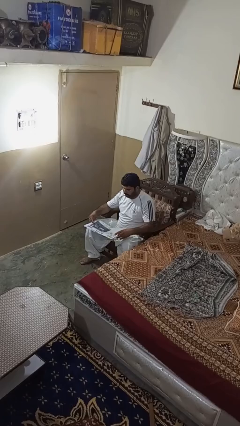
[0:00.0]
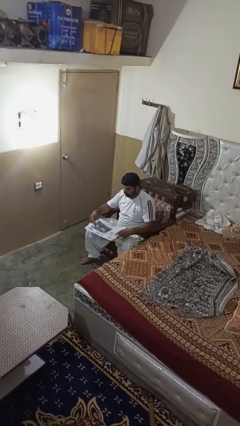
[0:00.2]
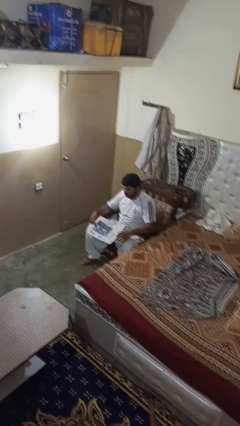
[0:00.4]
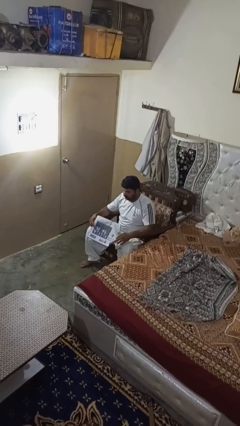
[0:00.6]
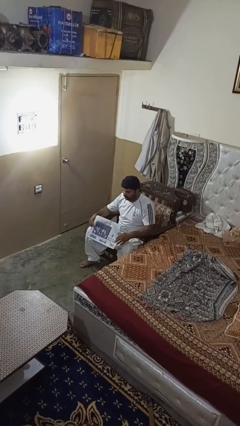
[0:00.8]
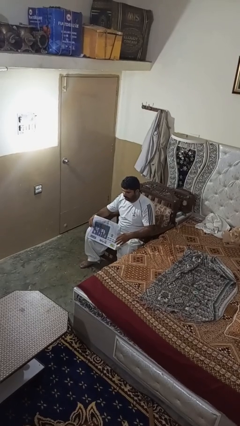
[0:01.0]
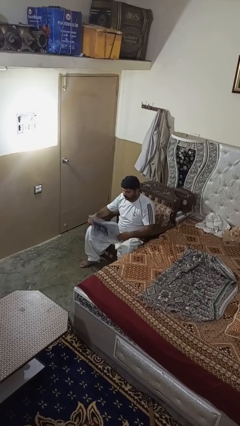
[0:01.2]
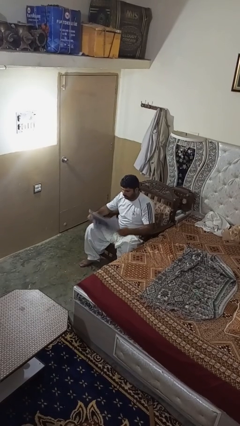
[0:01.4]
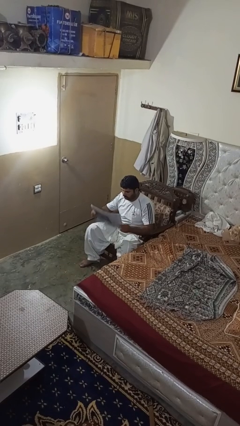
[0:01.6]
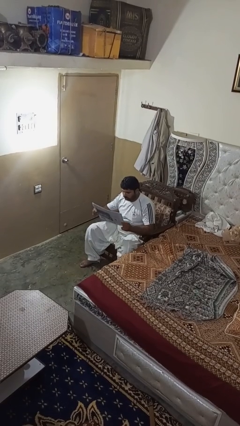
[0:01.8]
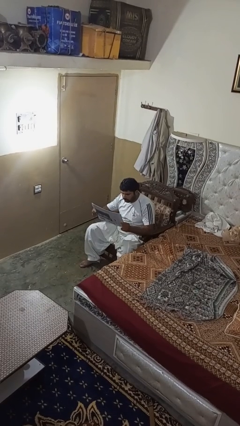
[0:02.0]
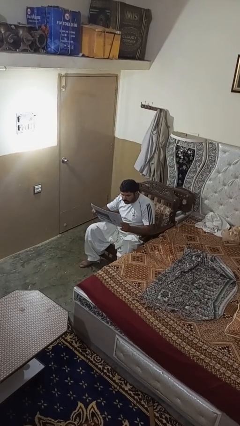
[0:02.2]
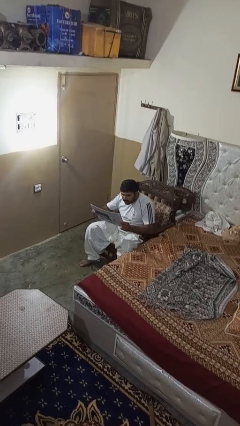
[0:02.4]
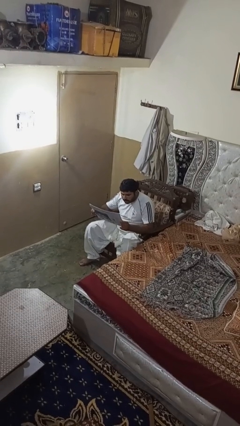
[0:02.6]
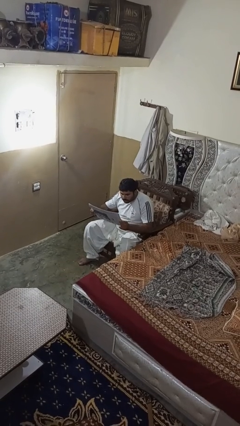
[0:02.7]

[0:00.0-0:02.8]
person reads newspaper

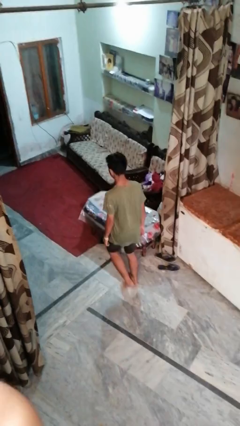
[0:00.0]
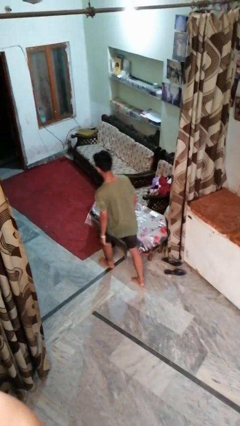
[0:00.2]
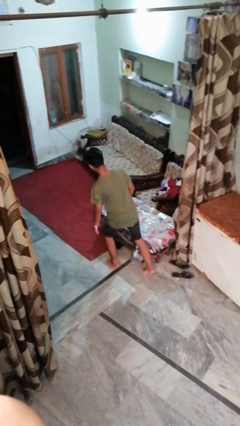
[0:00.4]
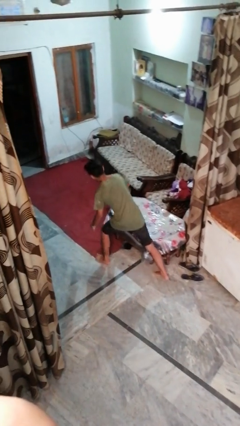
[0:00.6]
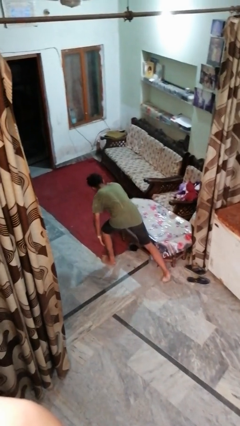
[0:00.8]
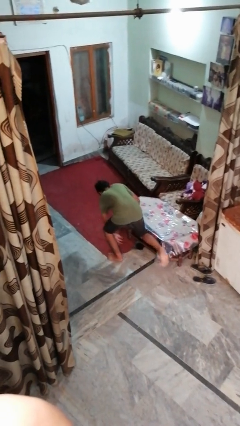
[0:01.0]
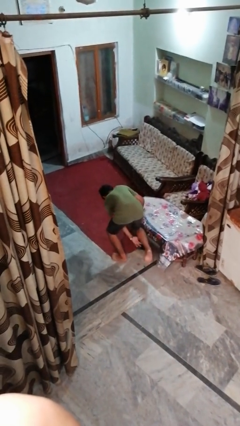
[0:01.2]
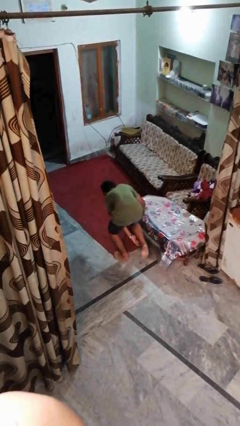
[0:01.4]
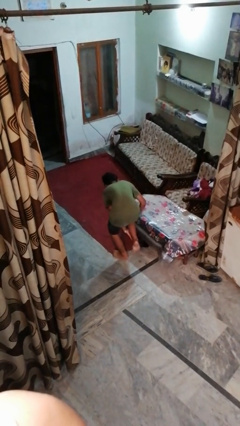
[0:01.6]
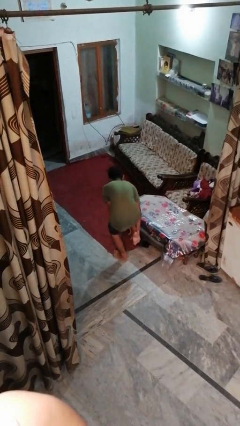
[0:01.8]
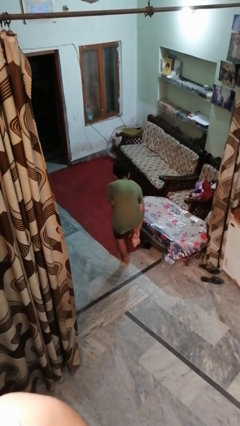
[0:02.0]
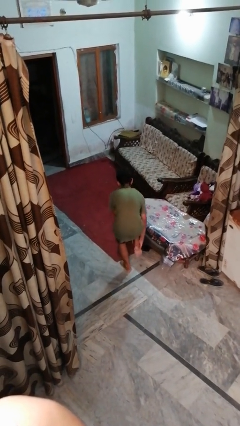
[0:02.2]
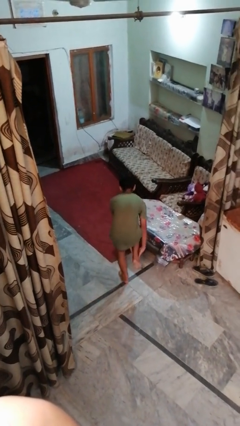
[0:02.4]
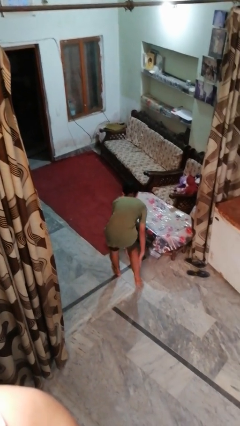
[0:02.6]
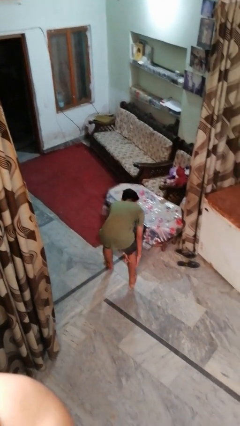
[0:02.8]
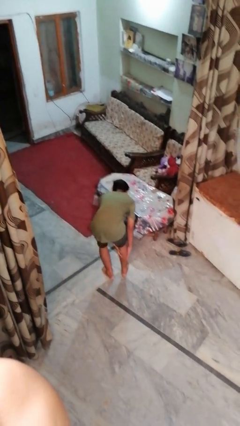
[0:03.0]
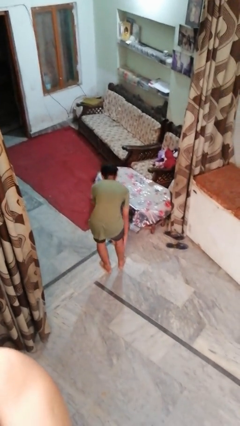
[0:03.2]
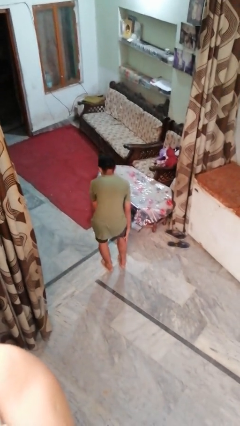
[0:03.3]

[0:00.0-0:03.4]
person stubs toe

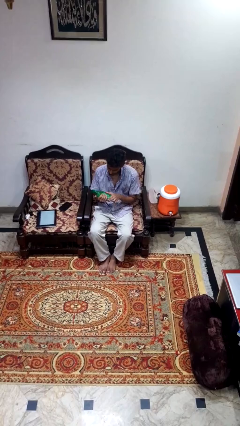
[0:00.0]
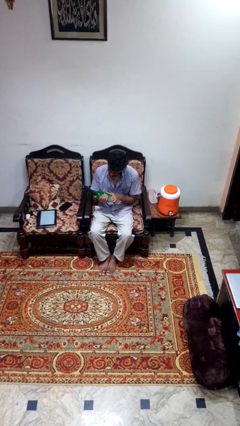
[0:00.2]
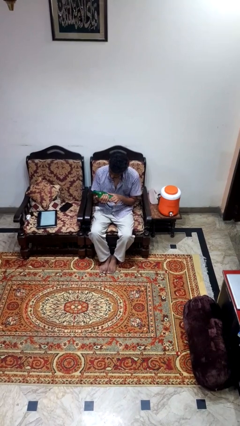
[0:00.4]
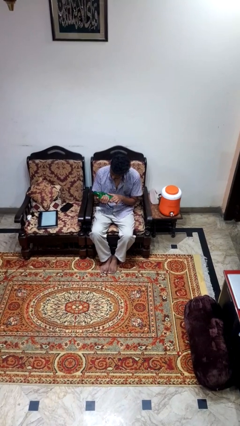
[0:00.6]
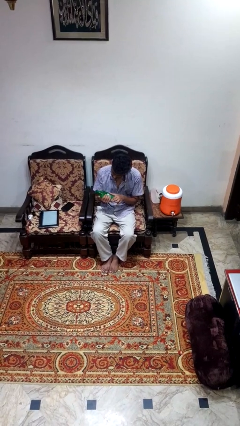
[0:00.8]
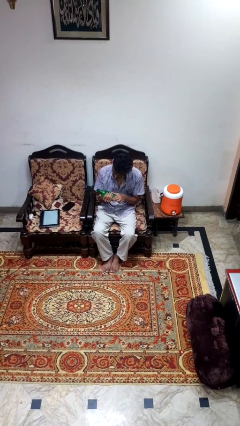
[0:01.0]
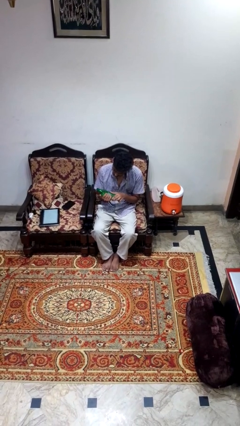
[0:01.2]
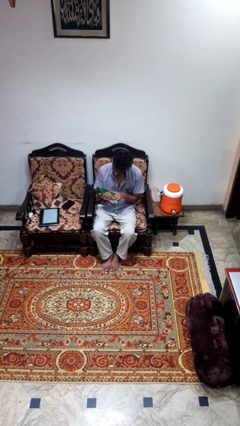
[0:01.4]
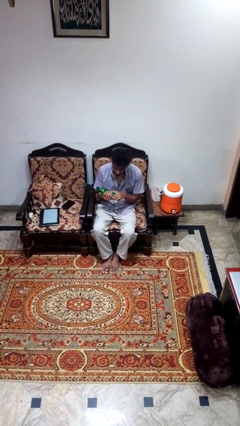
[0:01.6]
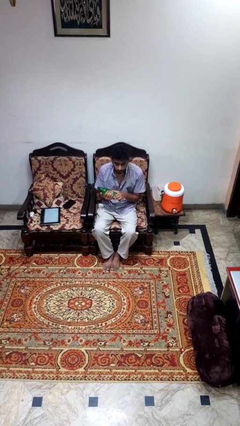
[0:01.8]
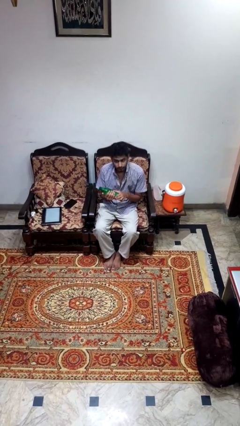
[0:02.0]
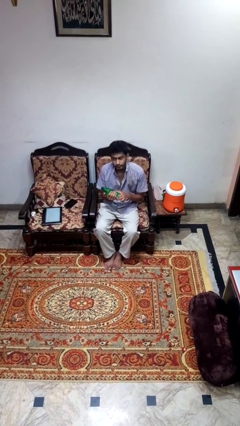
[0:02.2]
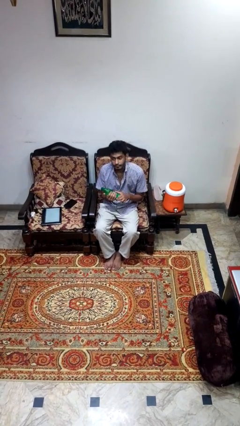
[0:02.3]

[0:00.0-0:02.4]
person squeezes object

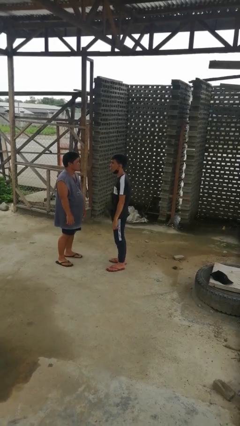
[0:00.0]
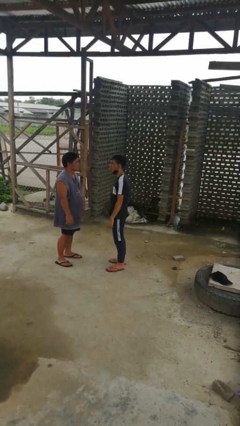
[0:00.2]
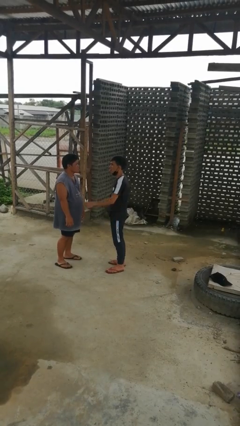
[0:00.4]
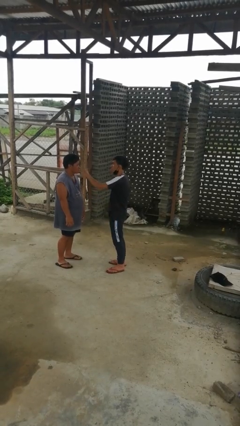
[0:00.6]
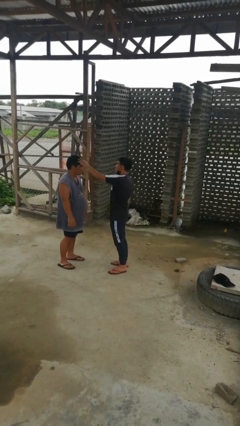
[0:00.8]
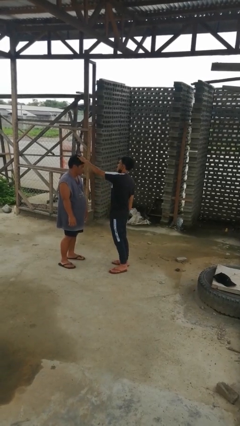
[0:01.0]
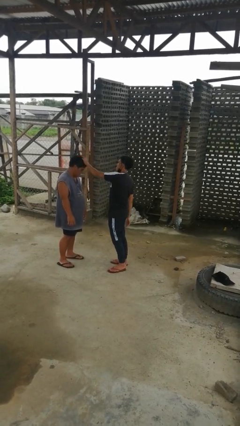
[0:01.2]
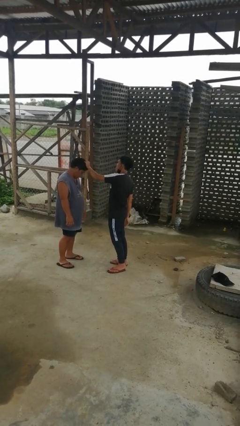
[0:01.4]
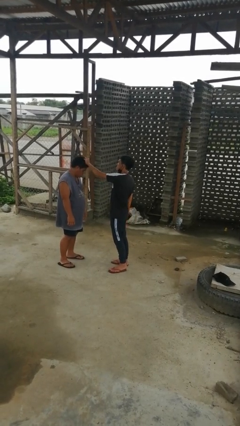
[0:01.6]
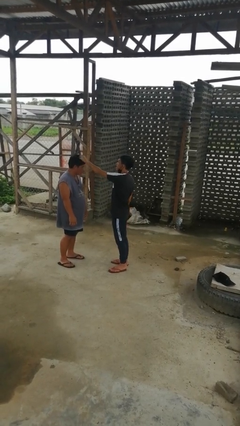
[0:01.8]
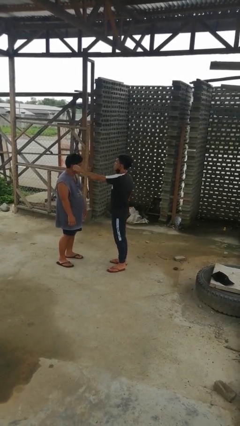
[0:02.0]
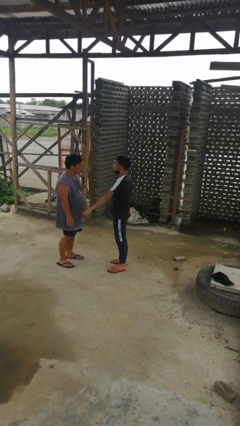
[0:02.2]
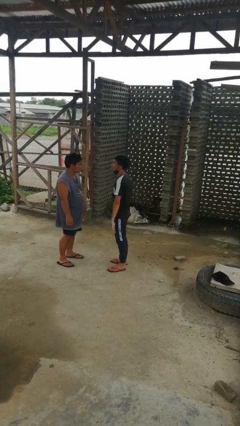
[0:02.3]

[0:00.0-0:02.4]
person grabs person by hair

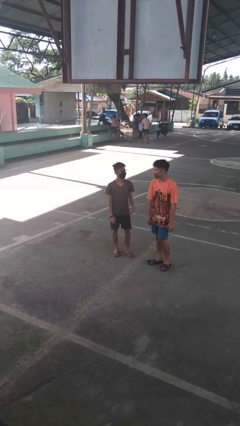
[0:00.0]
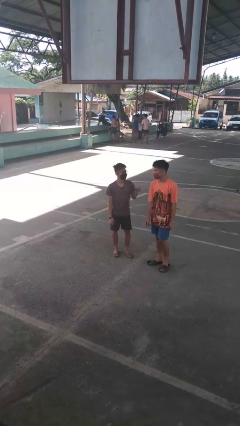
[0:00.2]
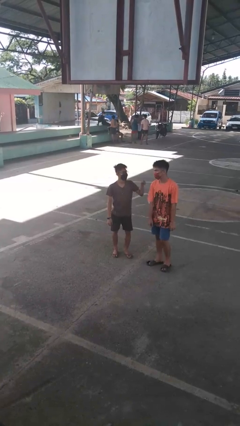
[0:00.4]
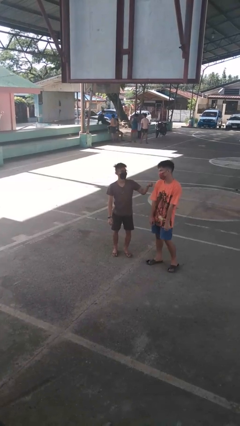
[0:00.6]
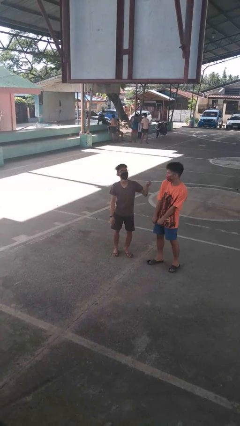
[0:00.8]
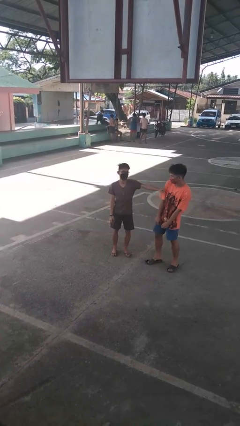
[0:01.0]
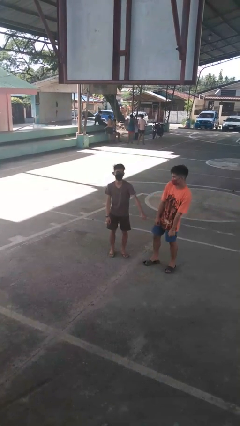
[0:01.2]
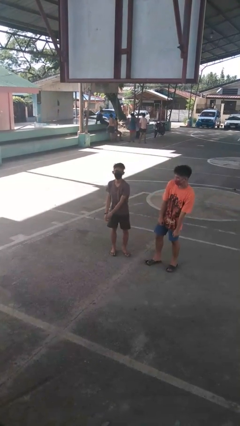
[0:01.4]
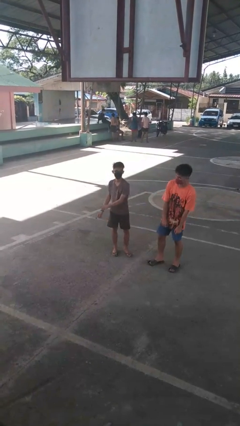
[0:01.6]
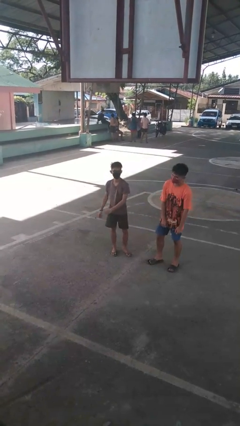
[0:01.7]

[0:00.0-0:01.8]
person pounds shoulders of person

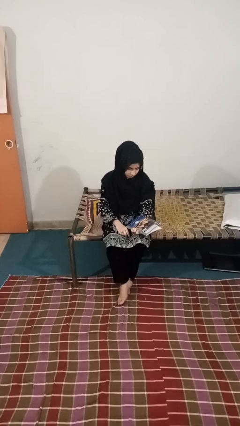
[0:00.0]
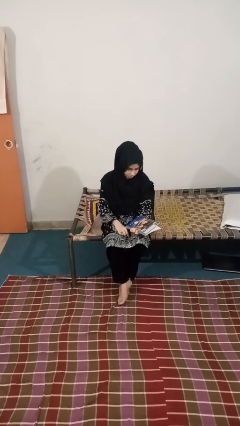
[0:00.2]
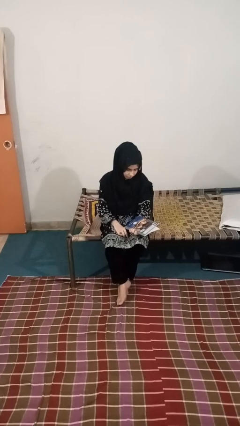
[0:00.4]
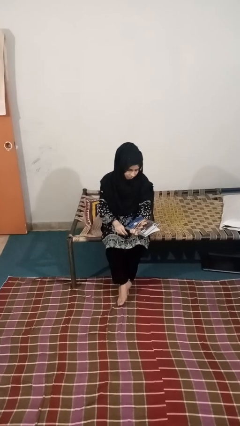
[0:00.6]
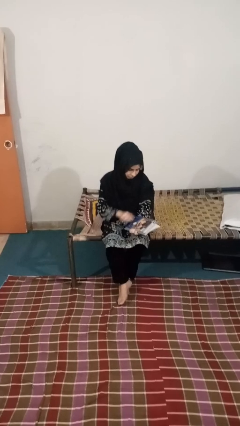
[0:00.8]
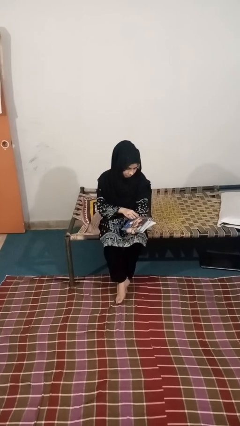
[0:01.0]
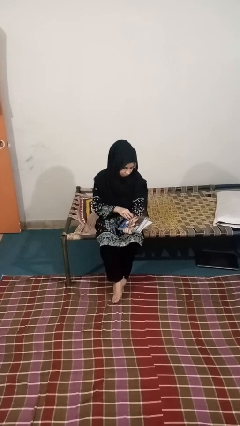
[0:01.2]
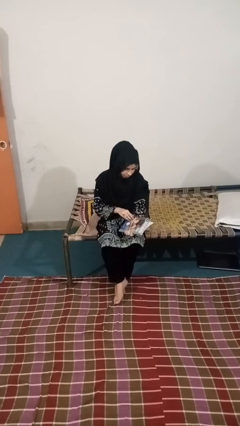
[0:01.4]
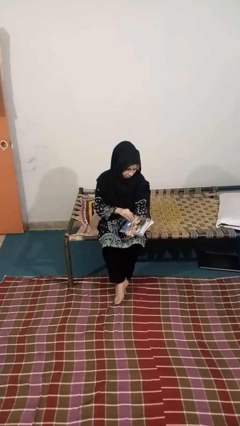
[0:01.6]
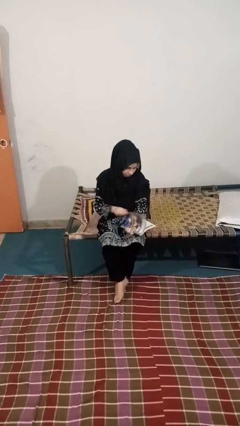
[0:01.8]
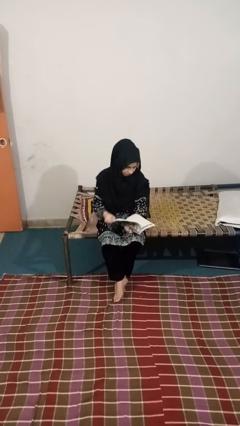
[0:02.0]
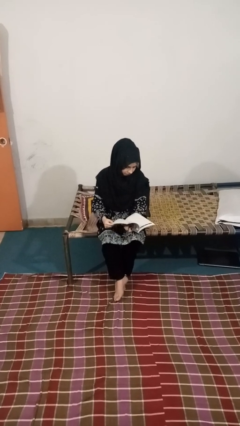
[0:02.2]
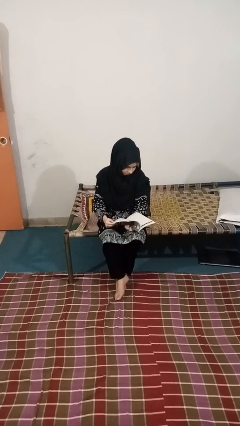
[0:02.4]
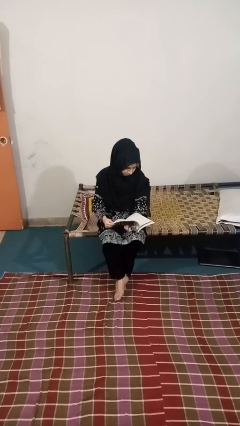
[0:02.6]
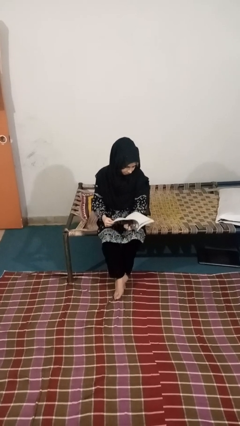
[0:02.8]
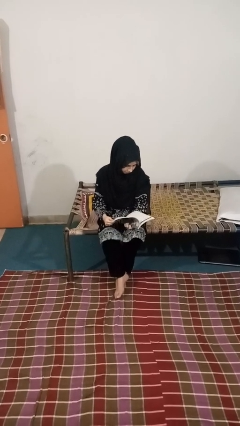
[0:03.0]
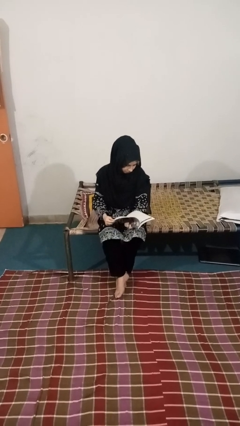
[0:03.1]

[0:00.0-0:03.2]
person reads book

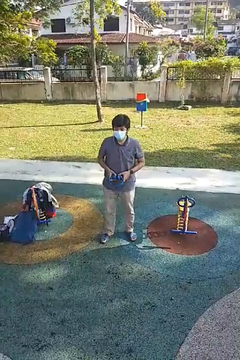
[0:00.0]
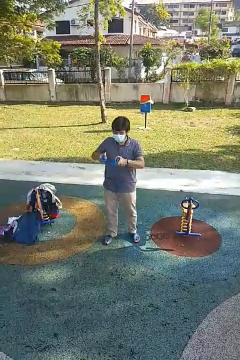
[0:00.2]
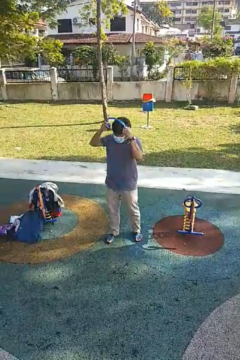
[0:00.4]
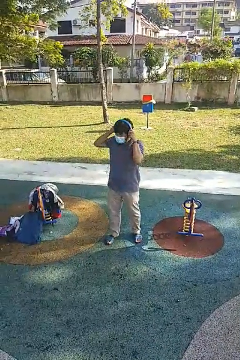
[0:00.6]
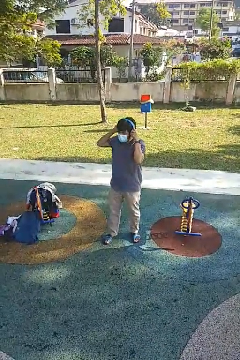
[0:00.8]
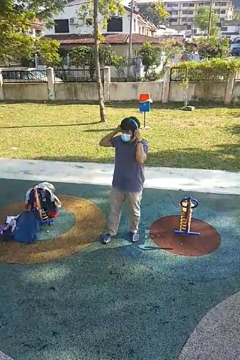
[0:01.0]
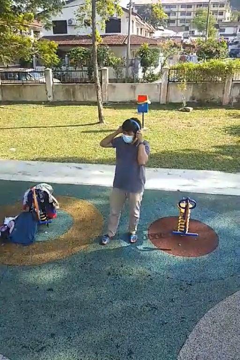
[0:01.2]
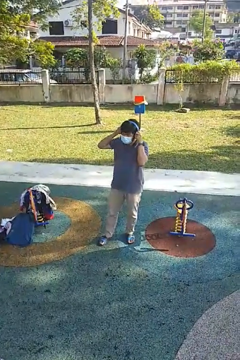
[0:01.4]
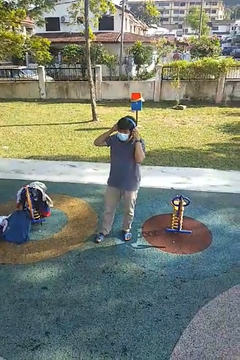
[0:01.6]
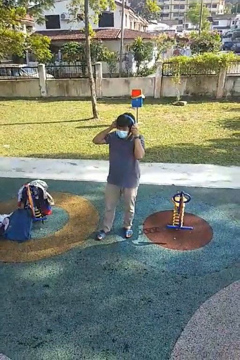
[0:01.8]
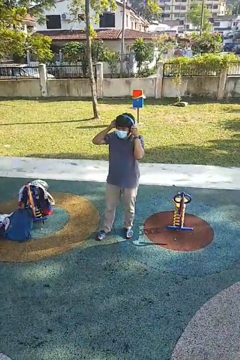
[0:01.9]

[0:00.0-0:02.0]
person puts on headphones
